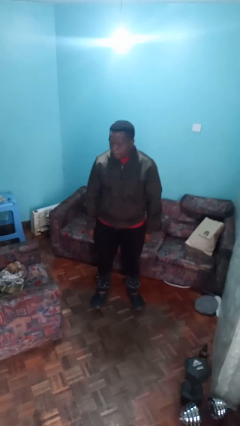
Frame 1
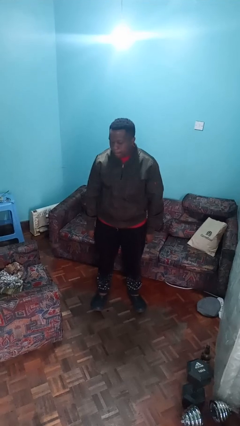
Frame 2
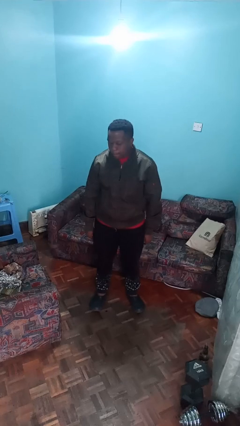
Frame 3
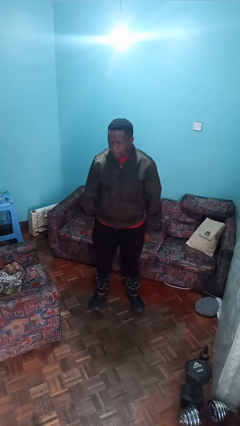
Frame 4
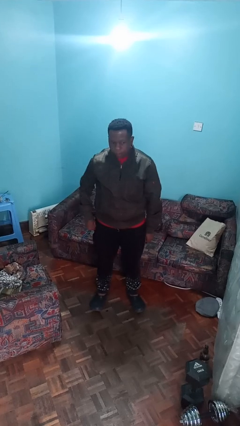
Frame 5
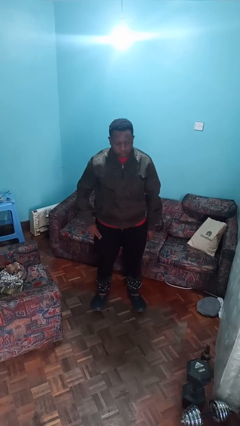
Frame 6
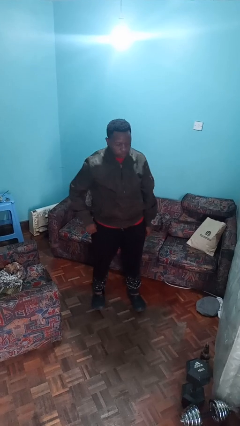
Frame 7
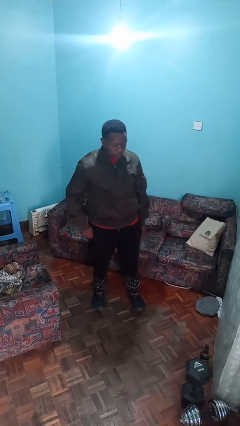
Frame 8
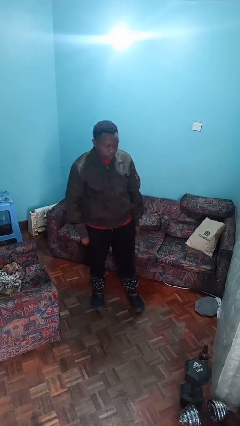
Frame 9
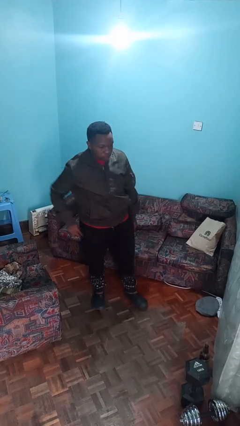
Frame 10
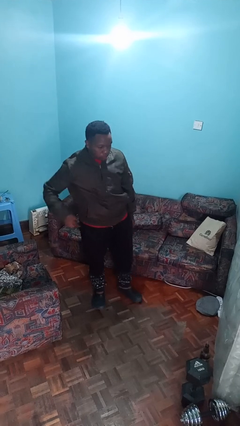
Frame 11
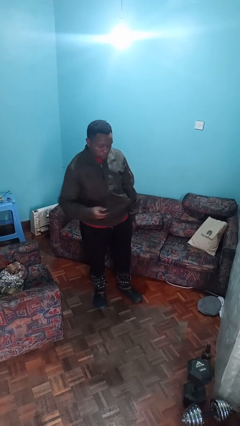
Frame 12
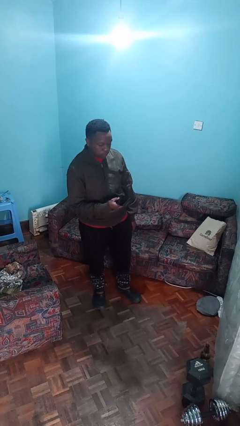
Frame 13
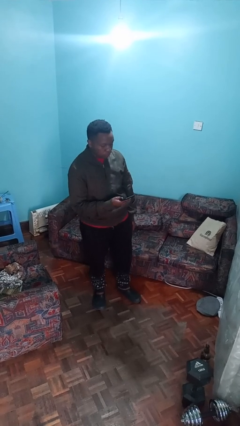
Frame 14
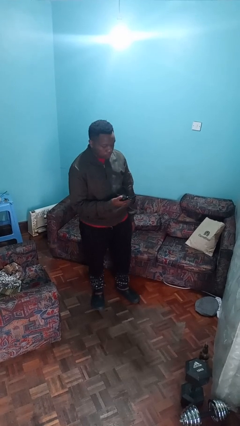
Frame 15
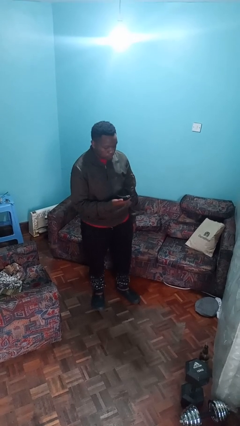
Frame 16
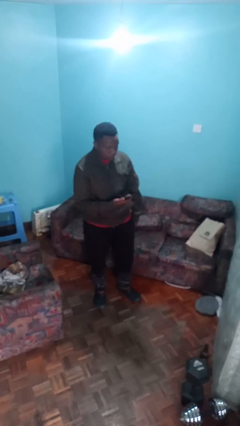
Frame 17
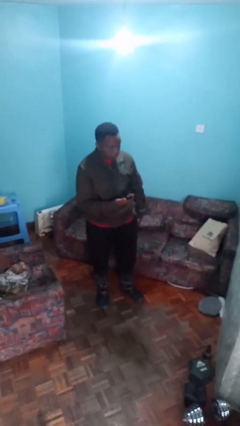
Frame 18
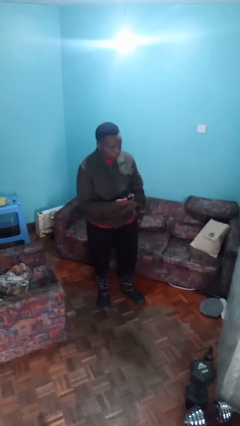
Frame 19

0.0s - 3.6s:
person takes phone from pocket

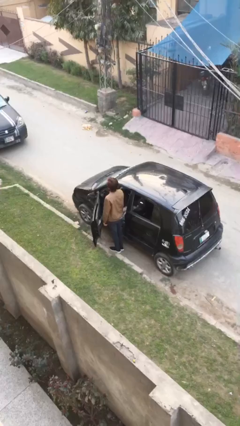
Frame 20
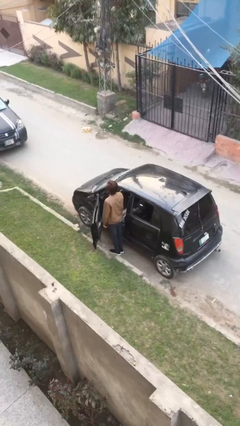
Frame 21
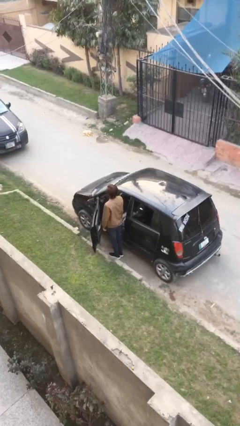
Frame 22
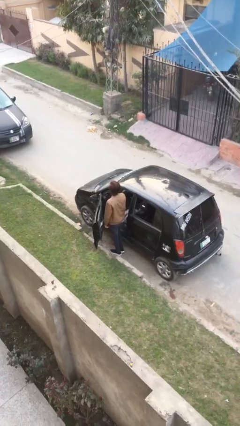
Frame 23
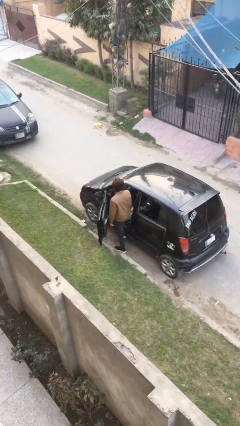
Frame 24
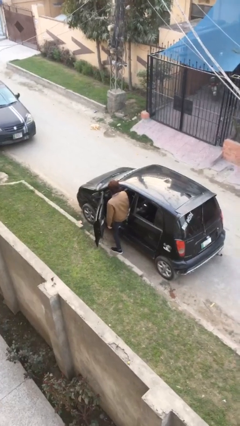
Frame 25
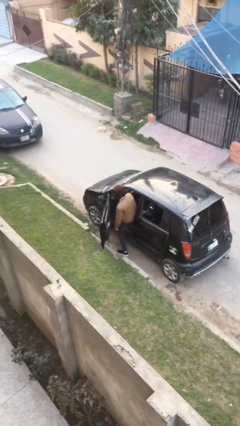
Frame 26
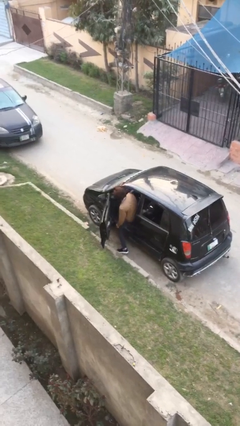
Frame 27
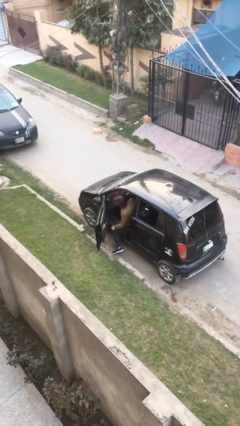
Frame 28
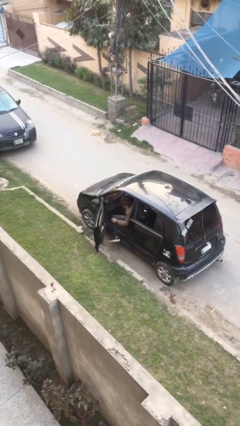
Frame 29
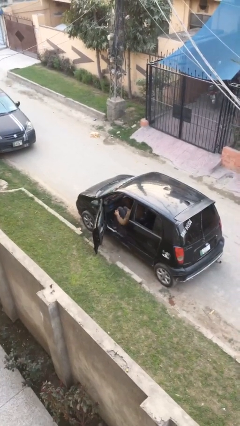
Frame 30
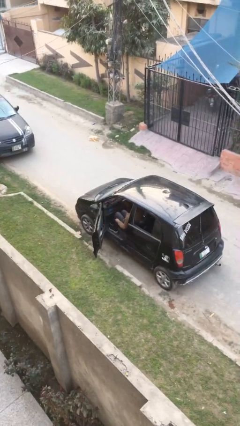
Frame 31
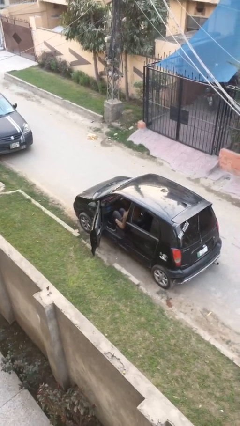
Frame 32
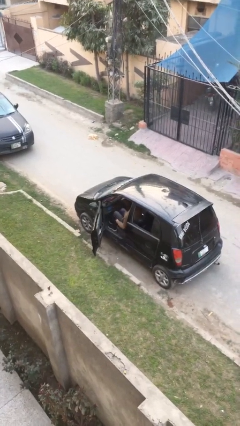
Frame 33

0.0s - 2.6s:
person enters car

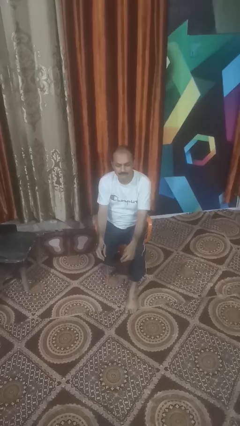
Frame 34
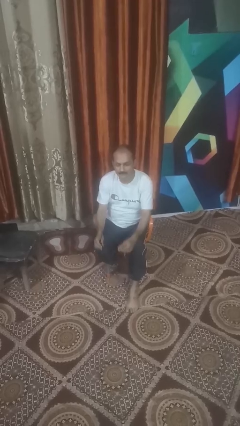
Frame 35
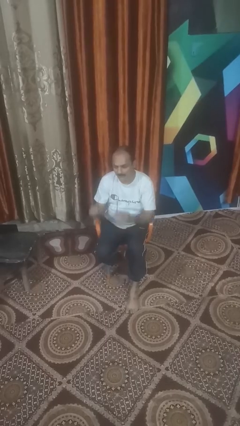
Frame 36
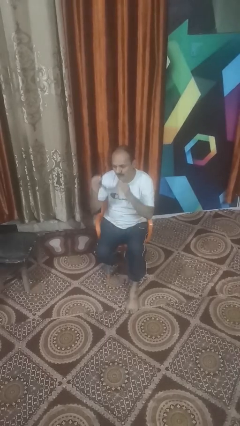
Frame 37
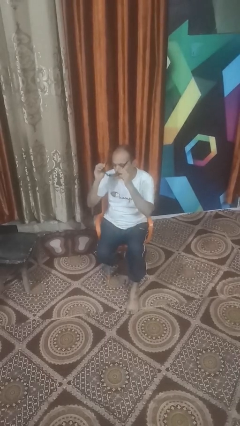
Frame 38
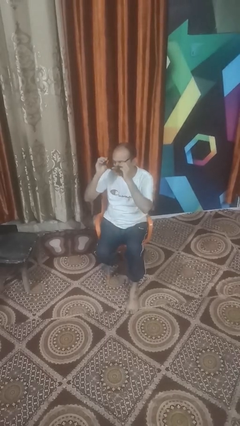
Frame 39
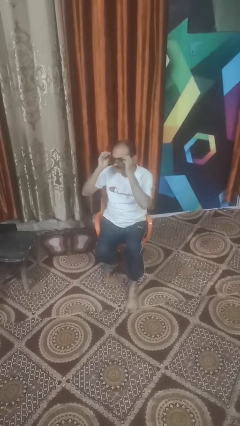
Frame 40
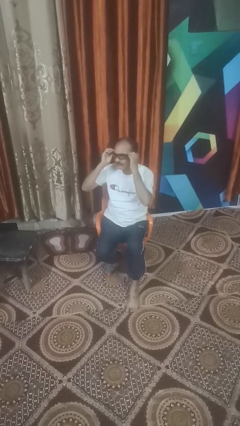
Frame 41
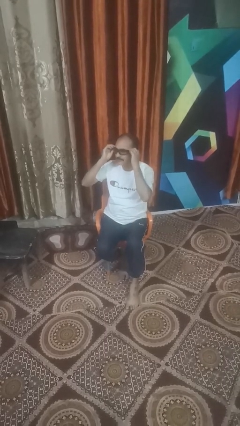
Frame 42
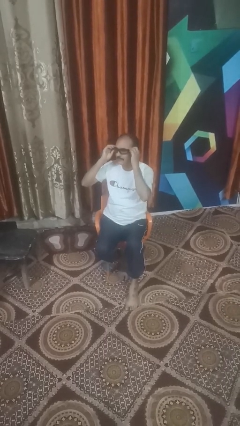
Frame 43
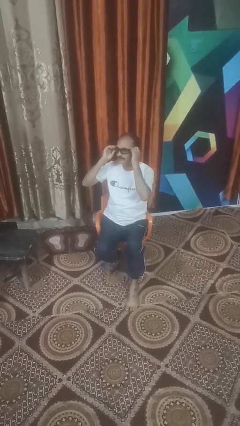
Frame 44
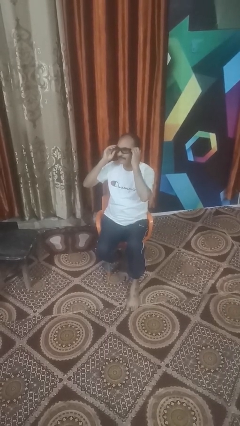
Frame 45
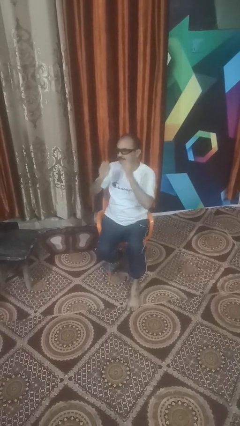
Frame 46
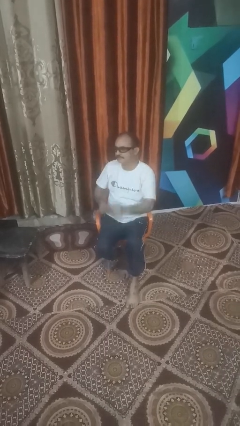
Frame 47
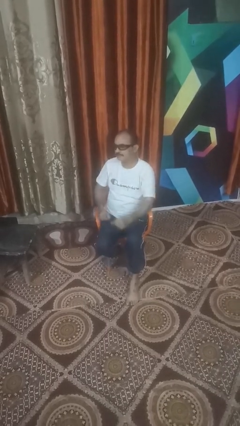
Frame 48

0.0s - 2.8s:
person puts on sunglasses

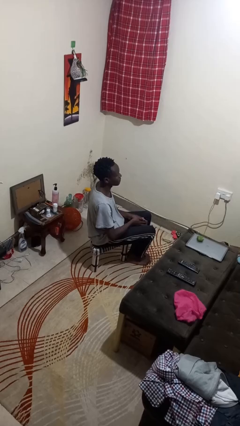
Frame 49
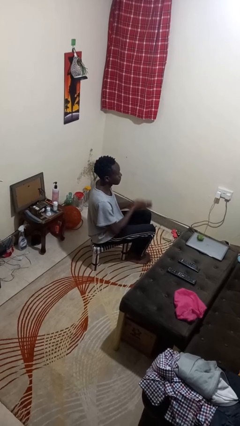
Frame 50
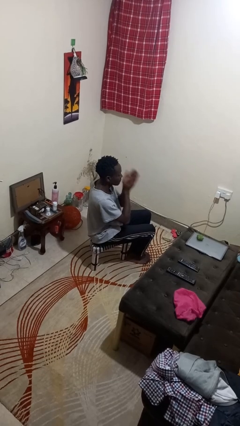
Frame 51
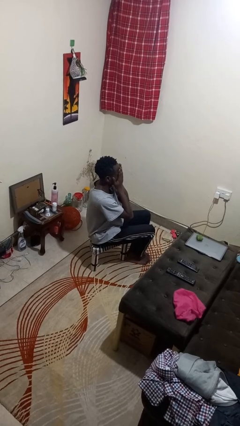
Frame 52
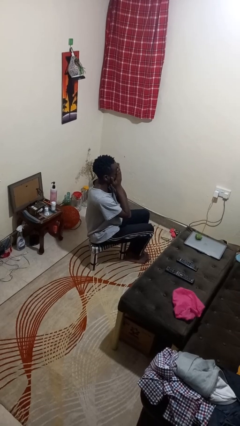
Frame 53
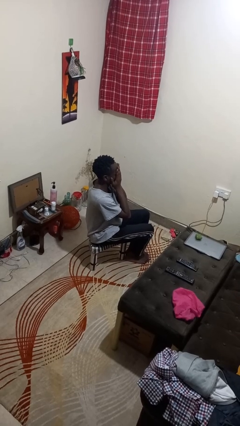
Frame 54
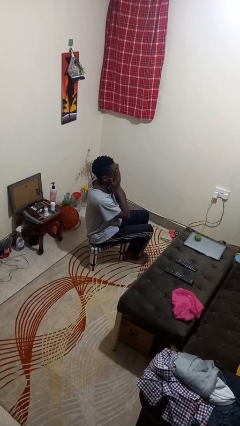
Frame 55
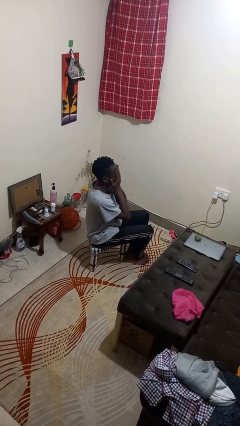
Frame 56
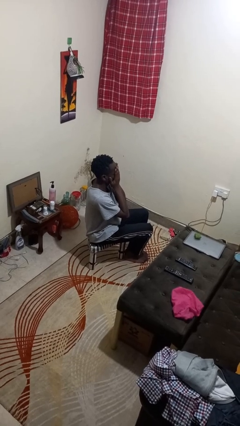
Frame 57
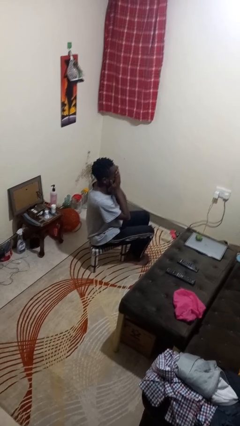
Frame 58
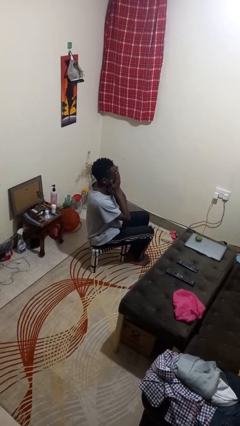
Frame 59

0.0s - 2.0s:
person covers face with hands

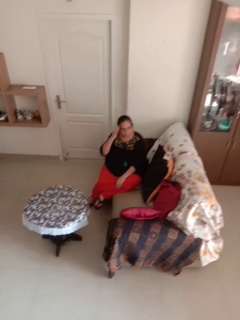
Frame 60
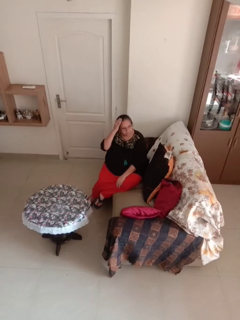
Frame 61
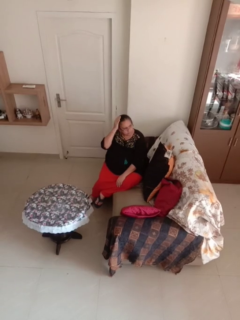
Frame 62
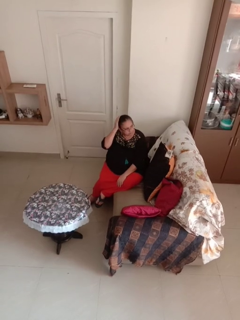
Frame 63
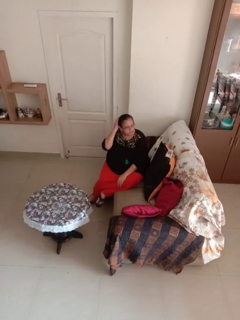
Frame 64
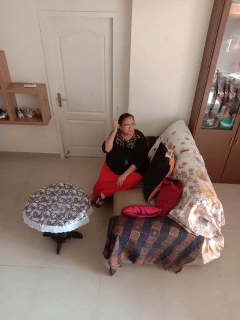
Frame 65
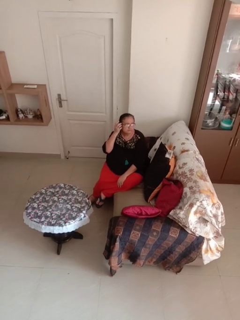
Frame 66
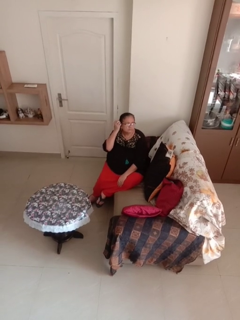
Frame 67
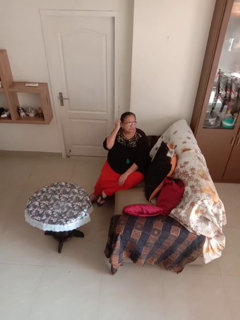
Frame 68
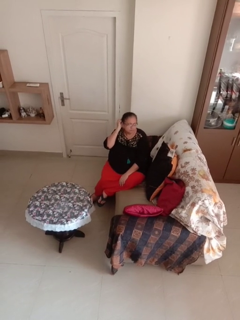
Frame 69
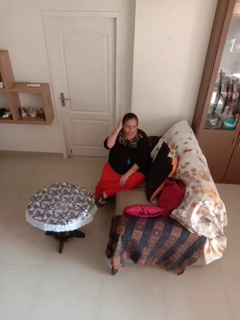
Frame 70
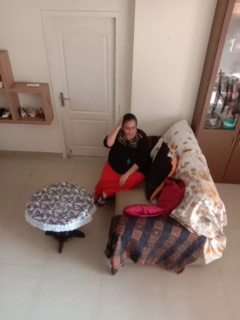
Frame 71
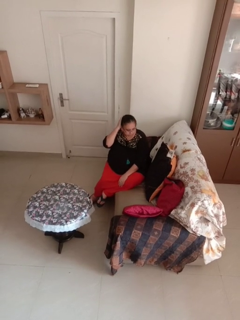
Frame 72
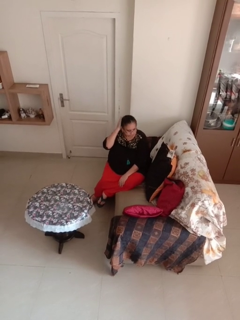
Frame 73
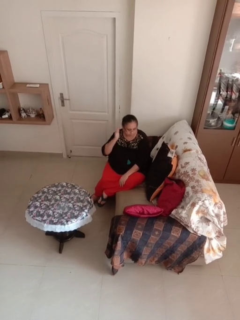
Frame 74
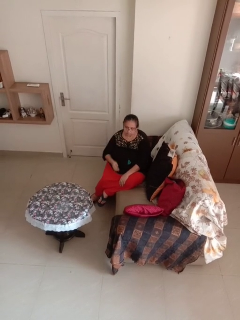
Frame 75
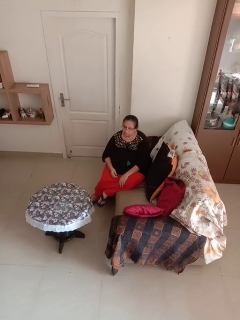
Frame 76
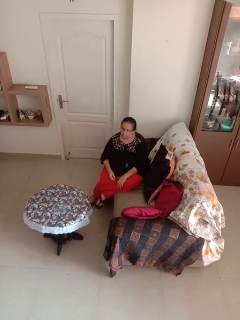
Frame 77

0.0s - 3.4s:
person strokes hair

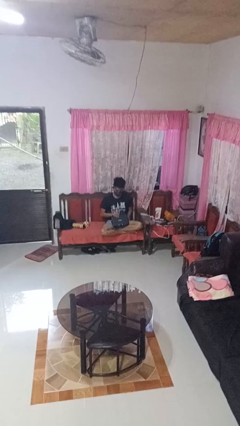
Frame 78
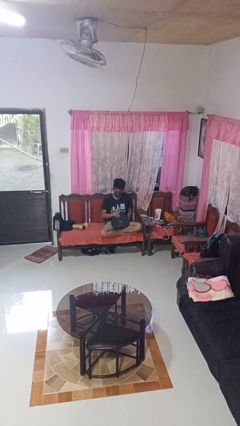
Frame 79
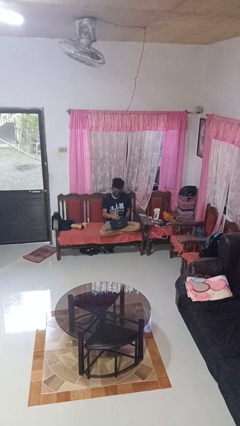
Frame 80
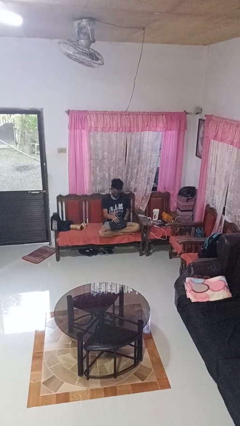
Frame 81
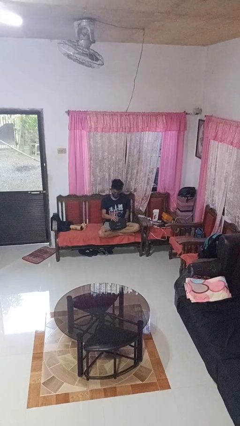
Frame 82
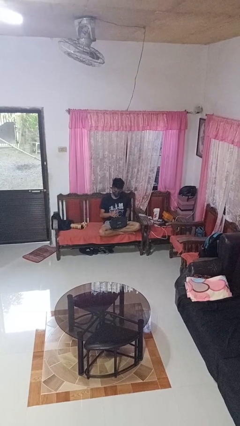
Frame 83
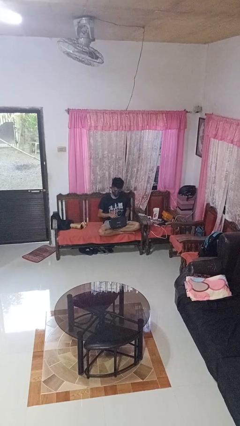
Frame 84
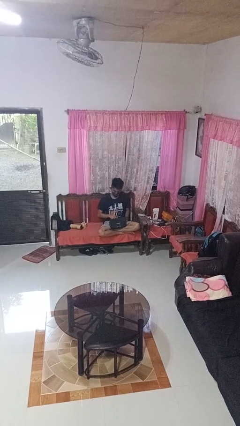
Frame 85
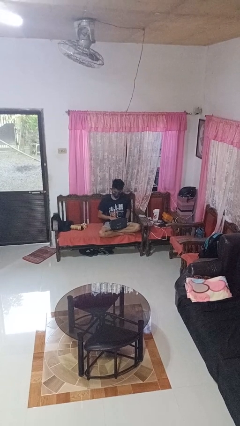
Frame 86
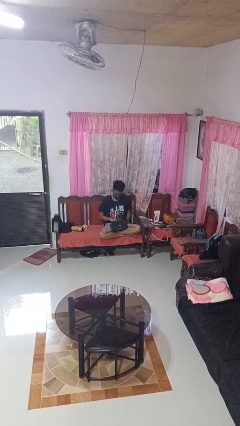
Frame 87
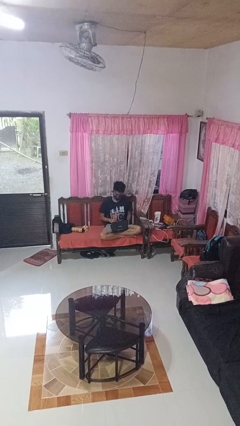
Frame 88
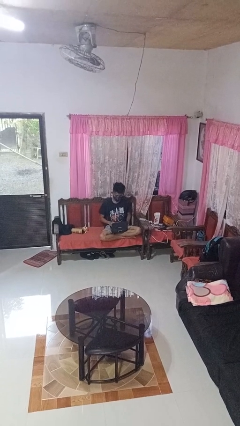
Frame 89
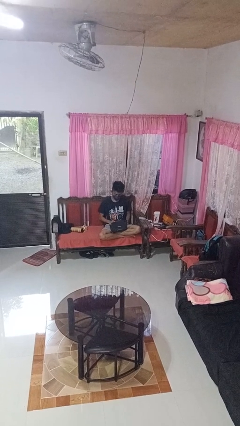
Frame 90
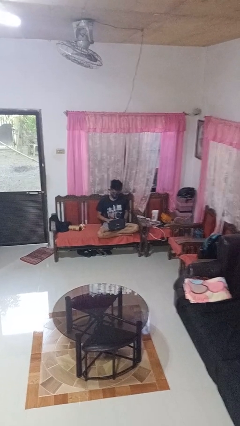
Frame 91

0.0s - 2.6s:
person opens laptop

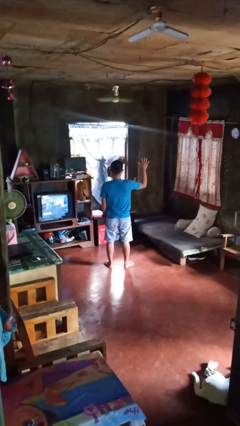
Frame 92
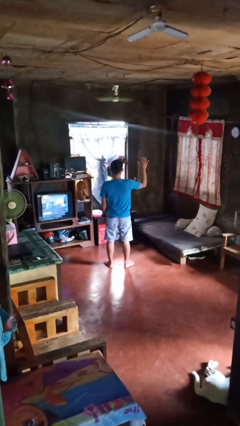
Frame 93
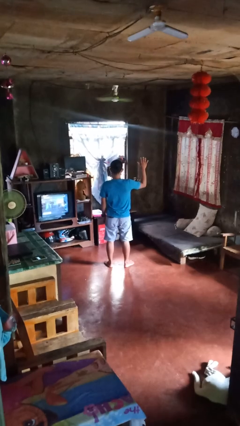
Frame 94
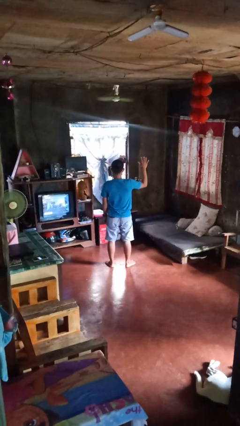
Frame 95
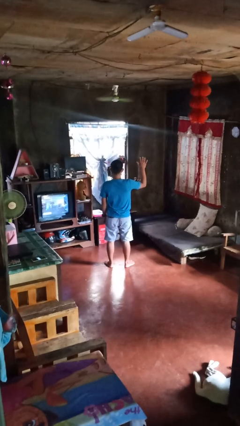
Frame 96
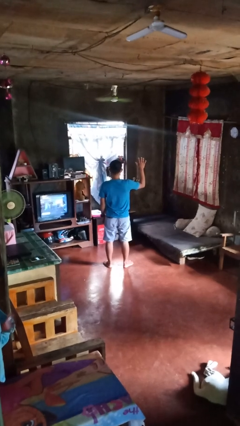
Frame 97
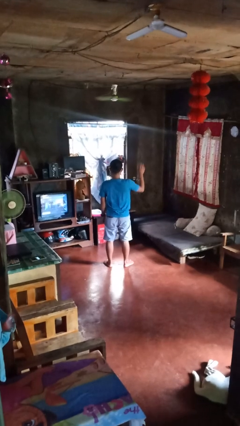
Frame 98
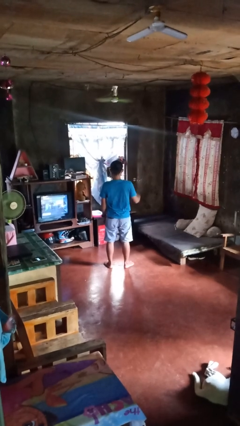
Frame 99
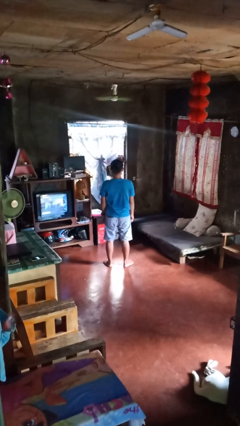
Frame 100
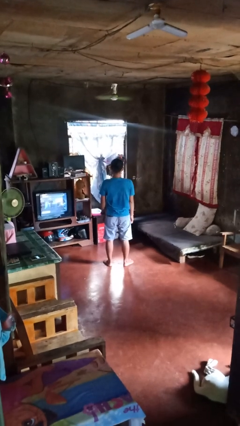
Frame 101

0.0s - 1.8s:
person gestures number five
